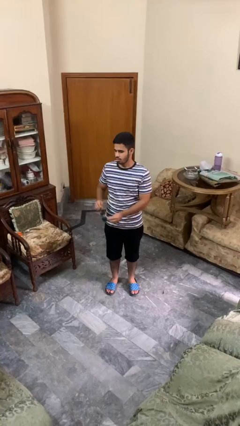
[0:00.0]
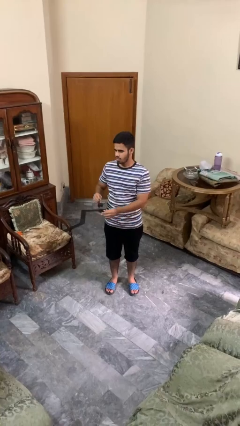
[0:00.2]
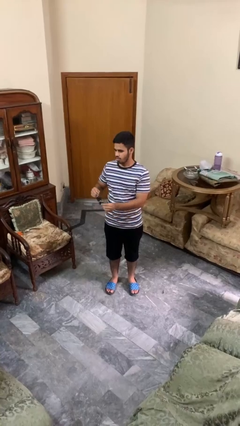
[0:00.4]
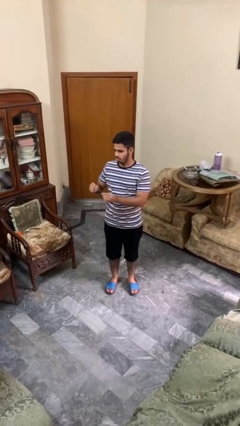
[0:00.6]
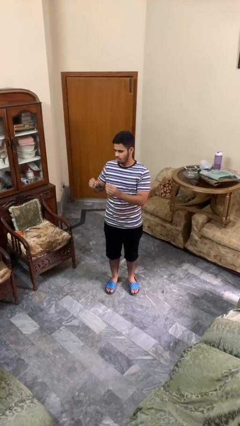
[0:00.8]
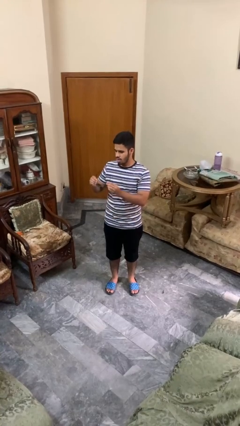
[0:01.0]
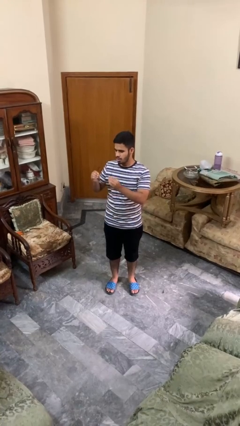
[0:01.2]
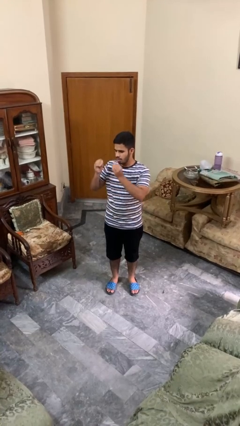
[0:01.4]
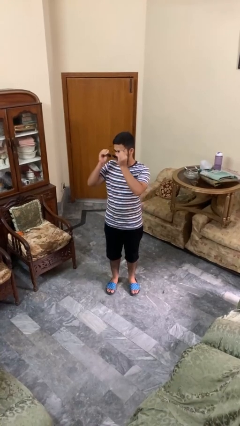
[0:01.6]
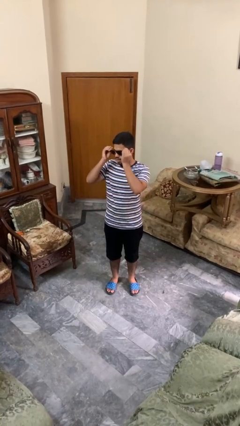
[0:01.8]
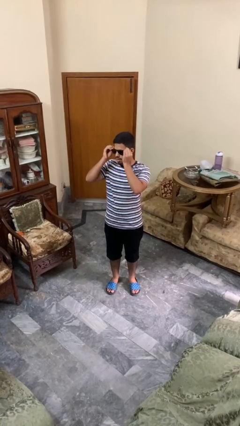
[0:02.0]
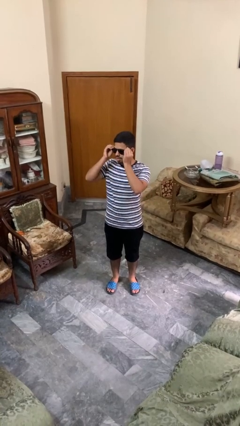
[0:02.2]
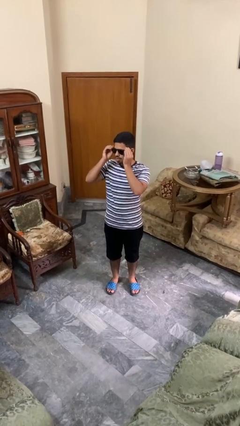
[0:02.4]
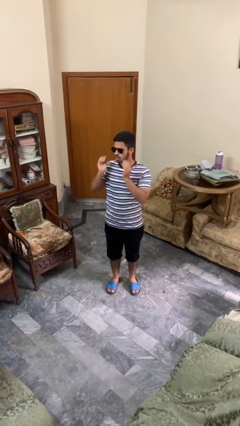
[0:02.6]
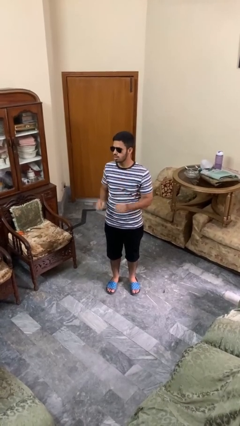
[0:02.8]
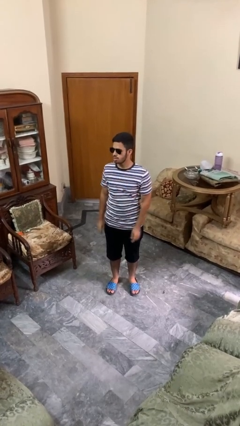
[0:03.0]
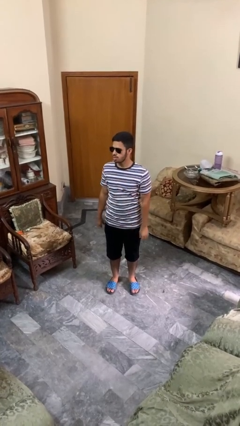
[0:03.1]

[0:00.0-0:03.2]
person puts on sunglasses

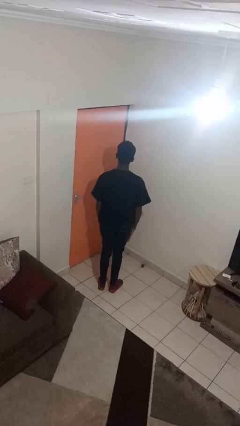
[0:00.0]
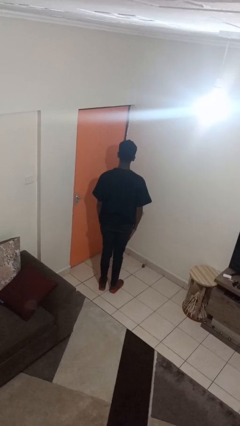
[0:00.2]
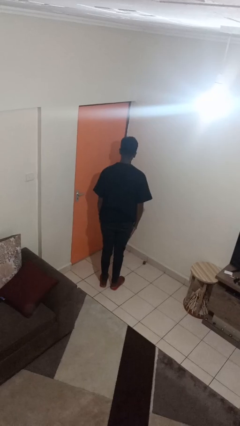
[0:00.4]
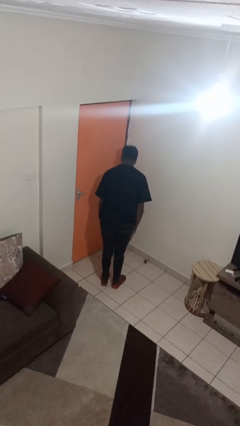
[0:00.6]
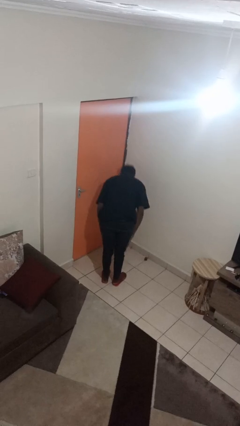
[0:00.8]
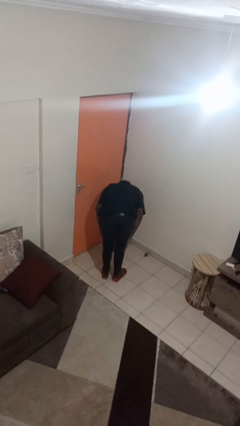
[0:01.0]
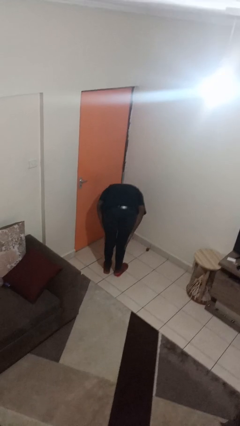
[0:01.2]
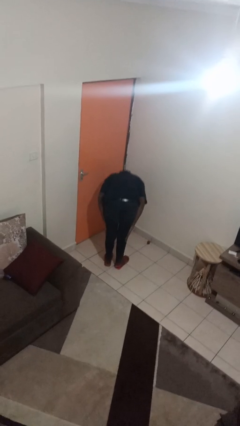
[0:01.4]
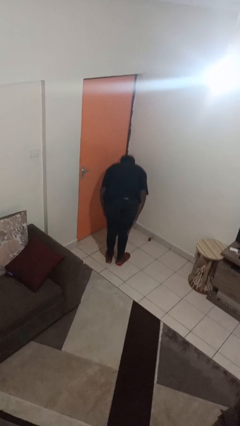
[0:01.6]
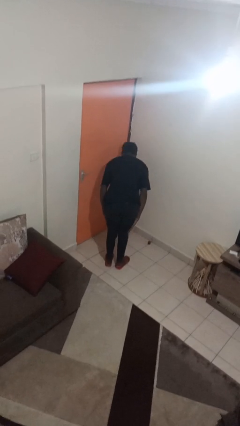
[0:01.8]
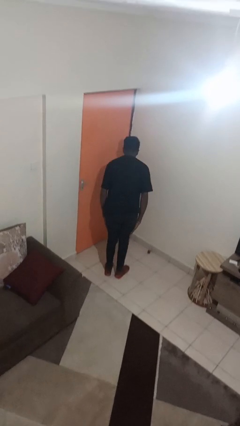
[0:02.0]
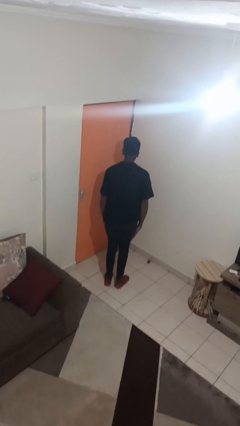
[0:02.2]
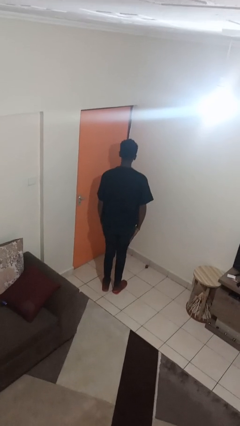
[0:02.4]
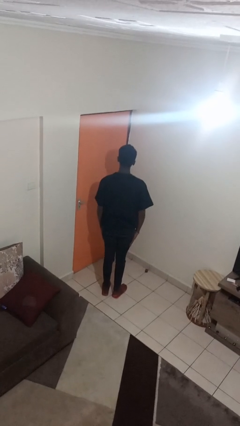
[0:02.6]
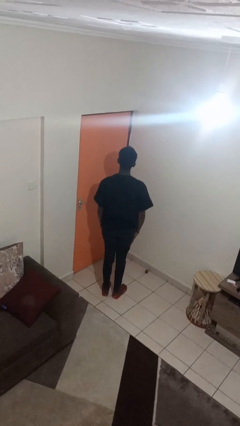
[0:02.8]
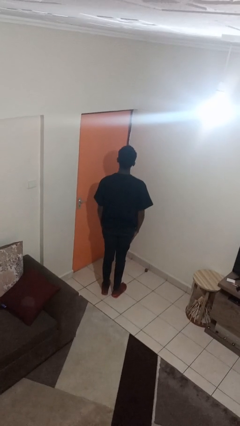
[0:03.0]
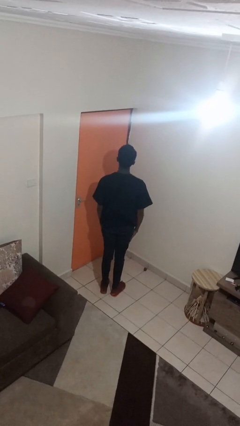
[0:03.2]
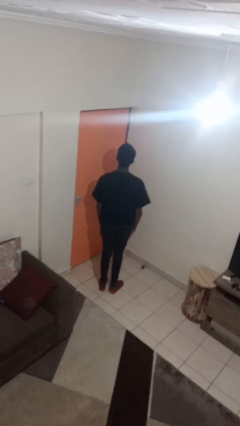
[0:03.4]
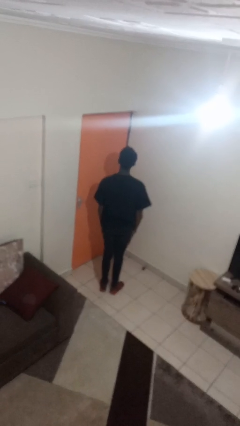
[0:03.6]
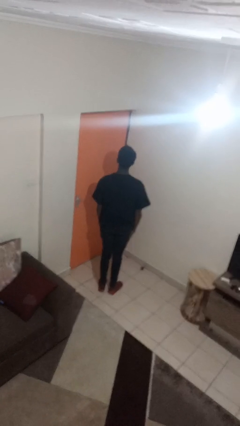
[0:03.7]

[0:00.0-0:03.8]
person bows

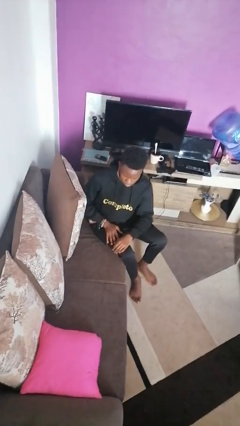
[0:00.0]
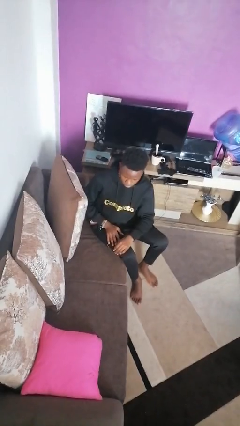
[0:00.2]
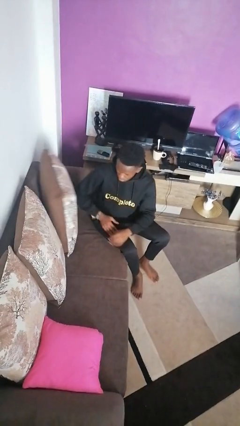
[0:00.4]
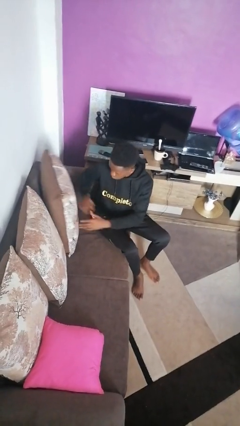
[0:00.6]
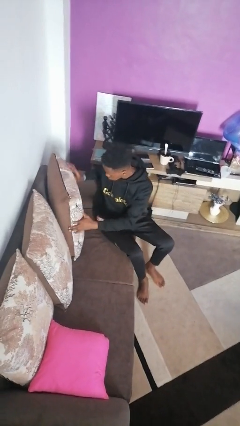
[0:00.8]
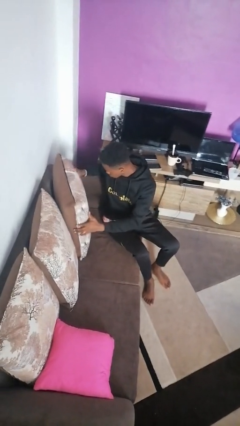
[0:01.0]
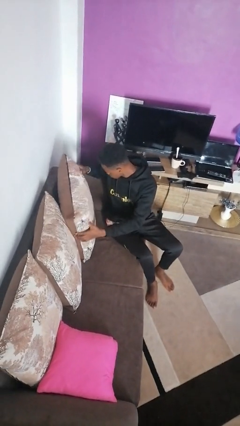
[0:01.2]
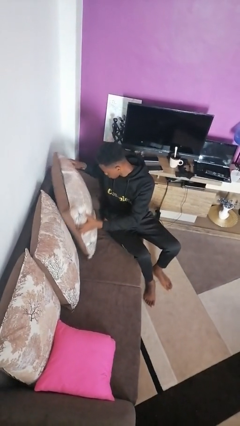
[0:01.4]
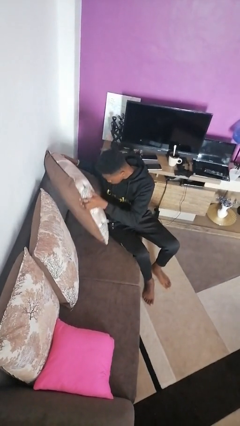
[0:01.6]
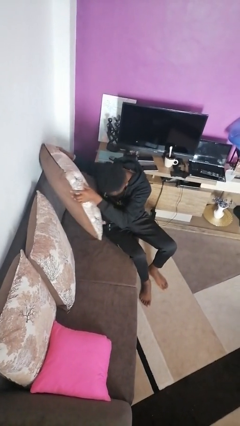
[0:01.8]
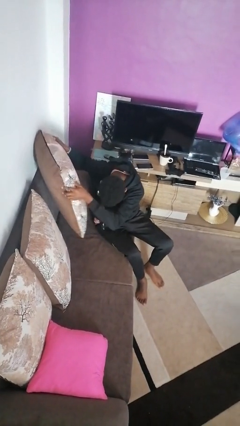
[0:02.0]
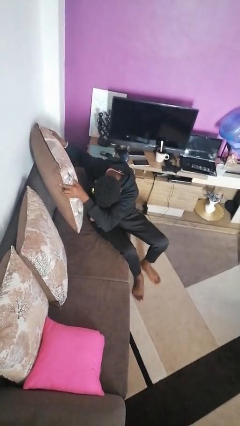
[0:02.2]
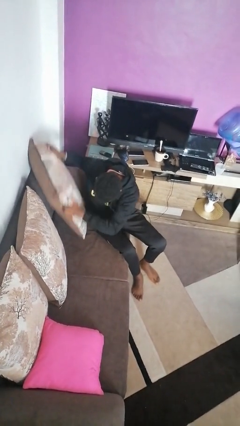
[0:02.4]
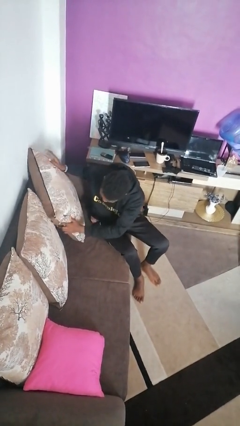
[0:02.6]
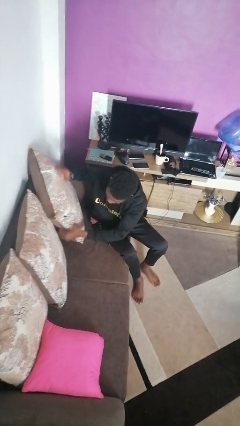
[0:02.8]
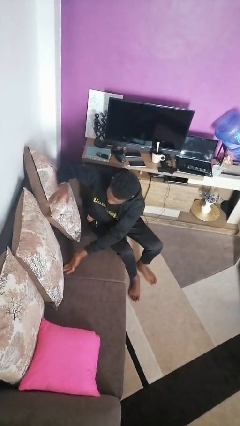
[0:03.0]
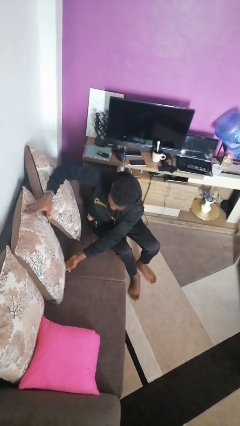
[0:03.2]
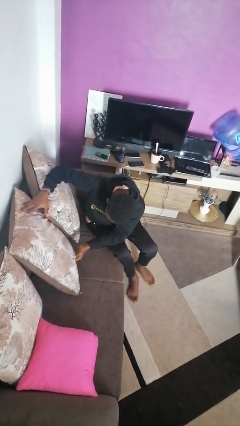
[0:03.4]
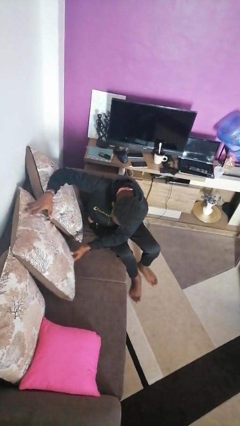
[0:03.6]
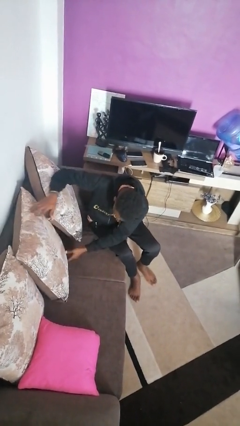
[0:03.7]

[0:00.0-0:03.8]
person searches in couch

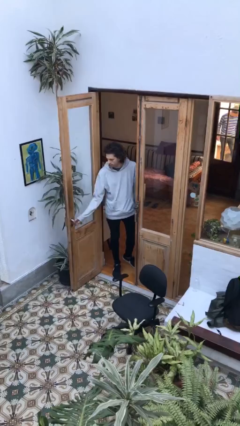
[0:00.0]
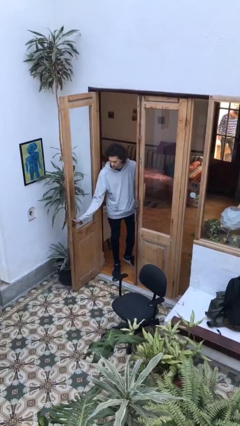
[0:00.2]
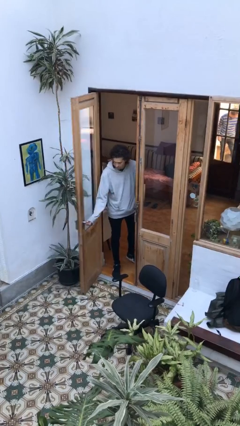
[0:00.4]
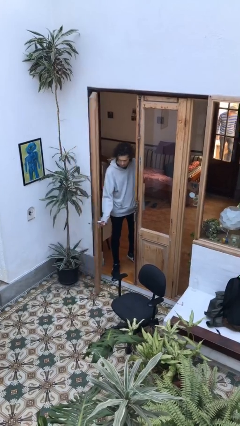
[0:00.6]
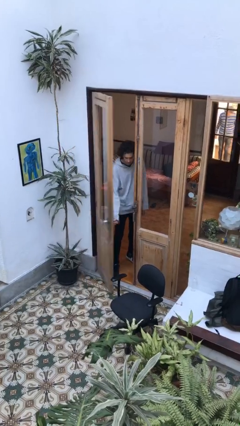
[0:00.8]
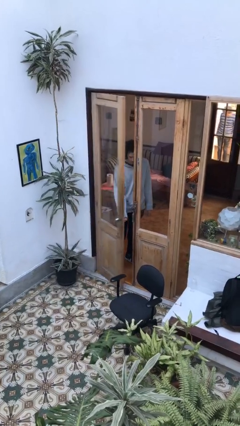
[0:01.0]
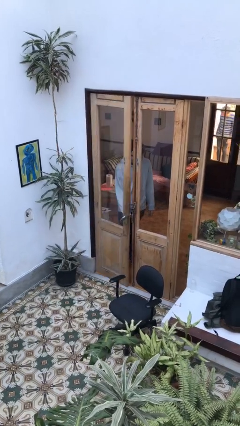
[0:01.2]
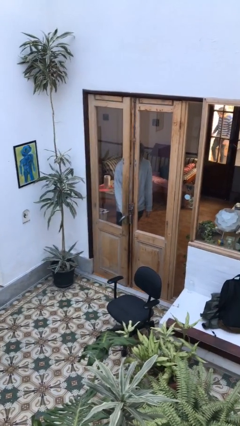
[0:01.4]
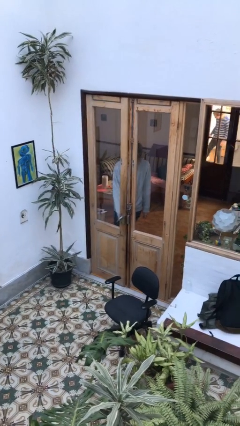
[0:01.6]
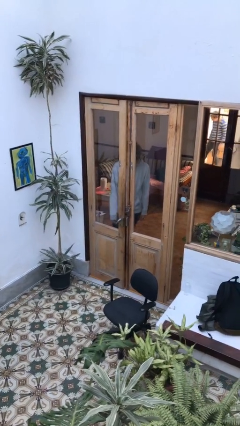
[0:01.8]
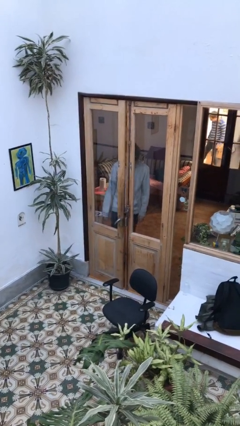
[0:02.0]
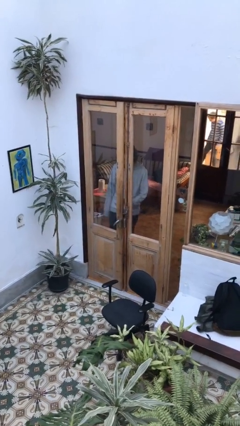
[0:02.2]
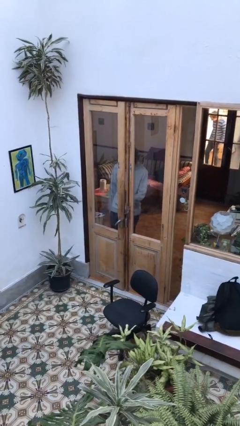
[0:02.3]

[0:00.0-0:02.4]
person closes facility door

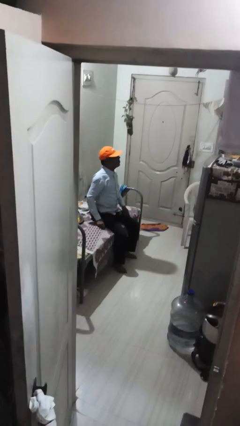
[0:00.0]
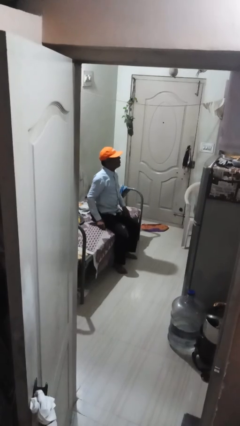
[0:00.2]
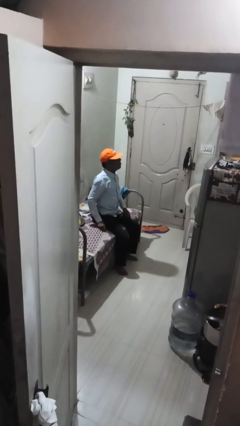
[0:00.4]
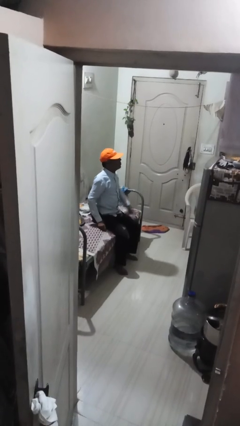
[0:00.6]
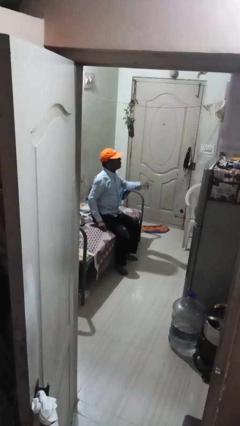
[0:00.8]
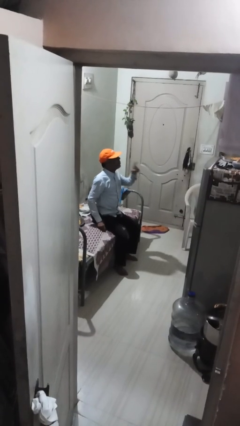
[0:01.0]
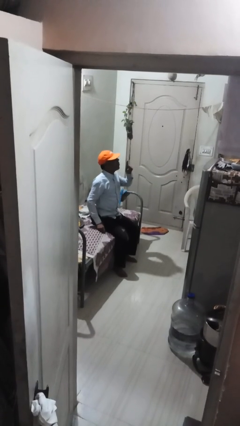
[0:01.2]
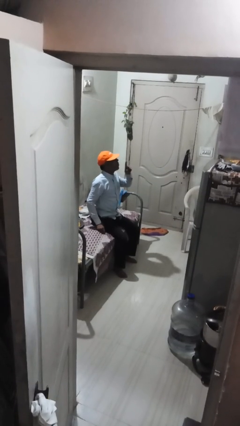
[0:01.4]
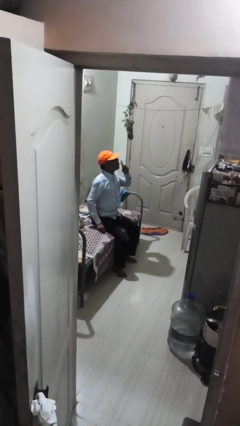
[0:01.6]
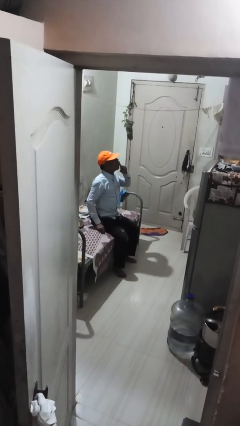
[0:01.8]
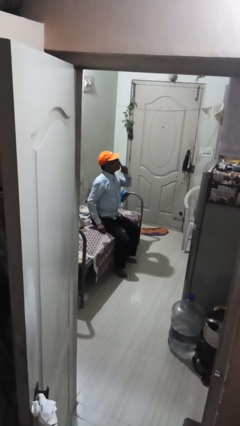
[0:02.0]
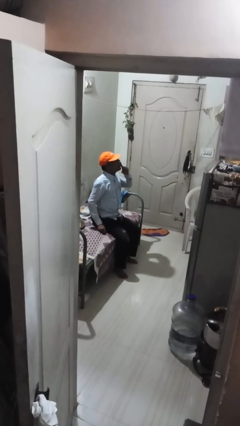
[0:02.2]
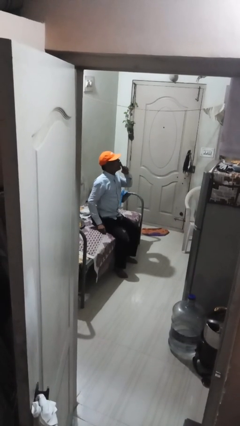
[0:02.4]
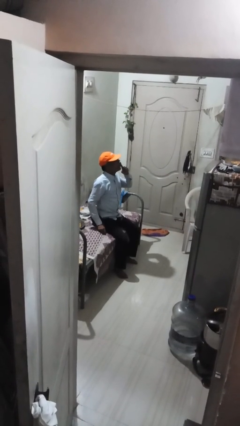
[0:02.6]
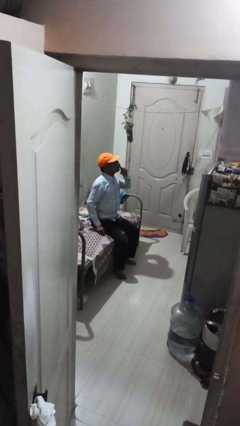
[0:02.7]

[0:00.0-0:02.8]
person gestures be quiet

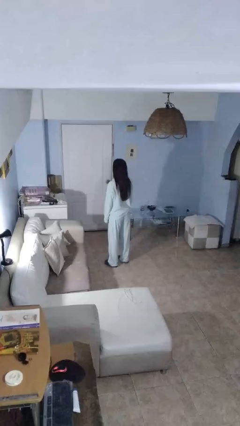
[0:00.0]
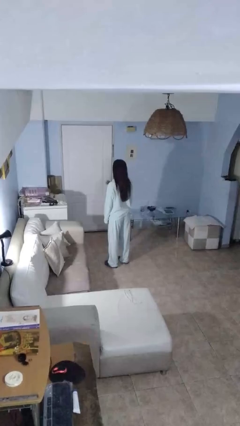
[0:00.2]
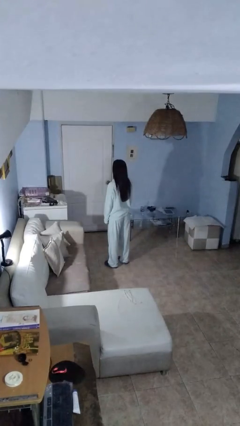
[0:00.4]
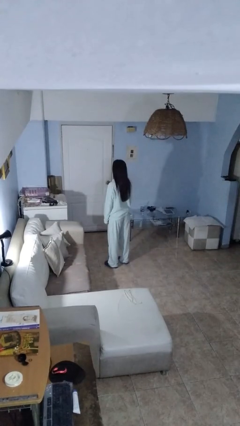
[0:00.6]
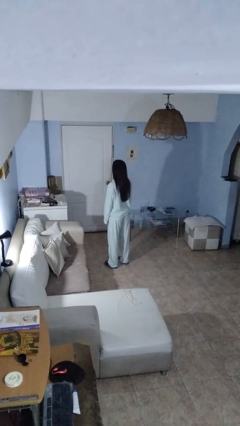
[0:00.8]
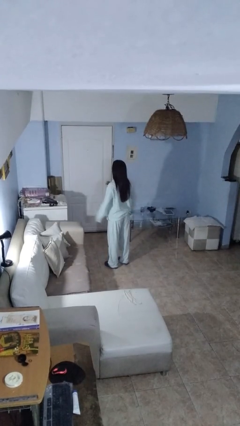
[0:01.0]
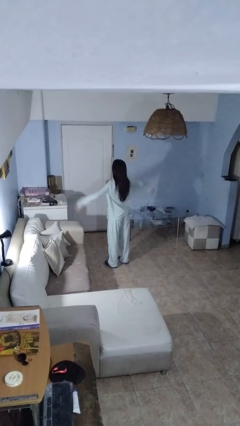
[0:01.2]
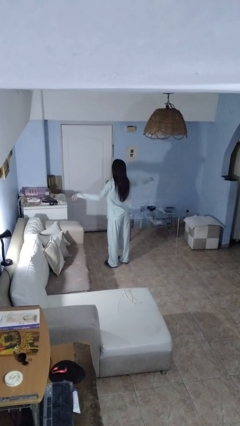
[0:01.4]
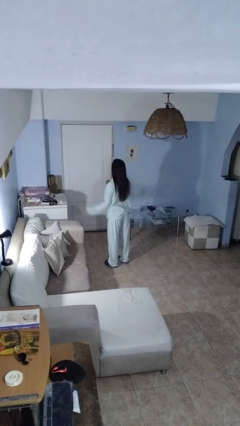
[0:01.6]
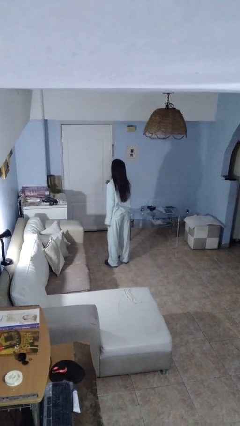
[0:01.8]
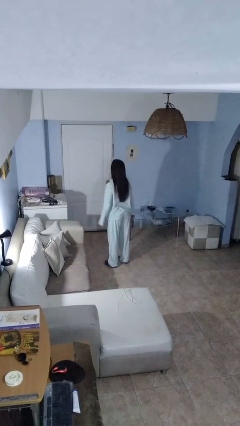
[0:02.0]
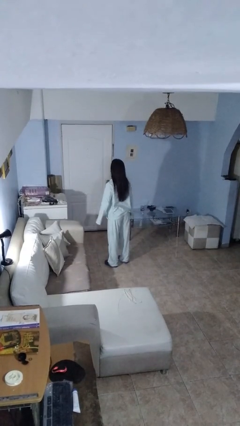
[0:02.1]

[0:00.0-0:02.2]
person slaps hands on thighs
